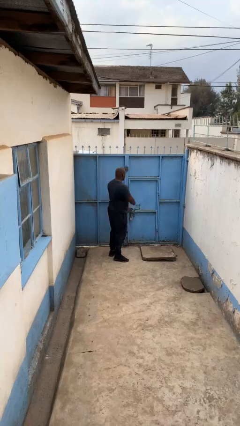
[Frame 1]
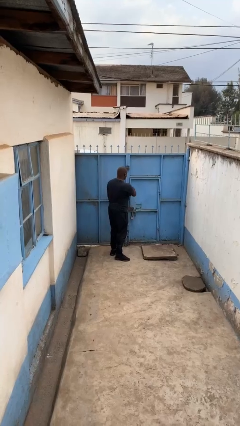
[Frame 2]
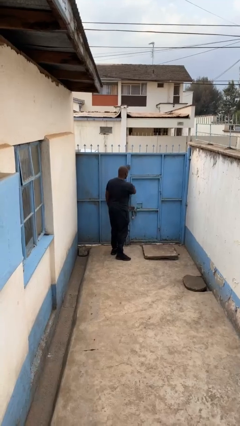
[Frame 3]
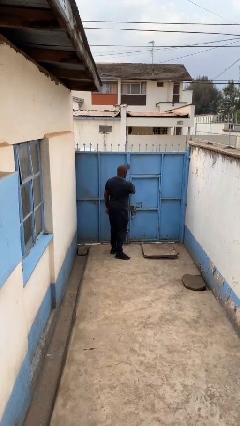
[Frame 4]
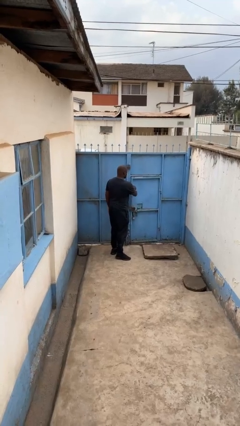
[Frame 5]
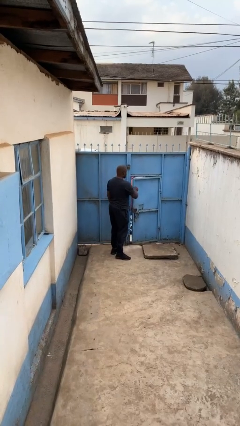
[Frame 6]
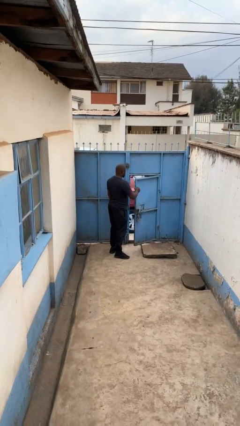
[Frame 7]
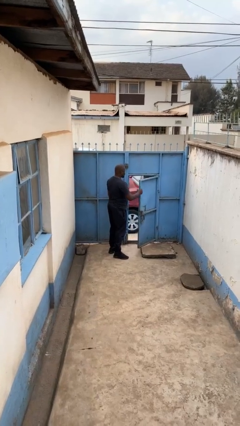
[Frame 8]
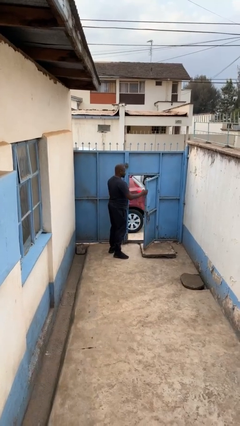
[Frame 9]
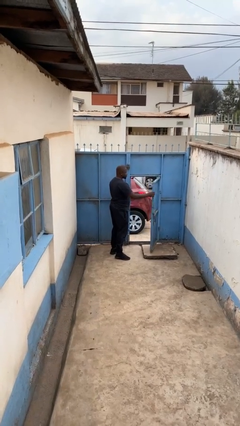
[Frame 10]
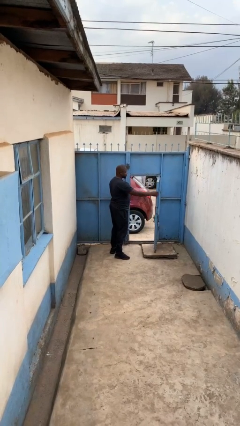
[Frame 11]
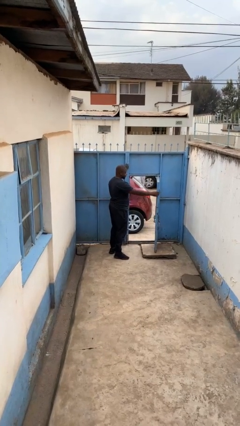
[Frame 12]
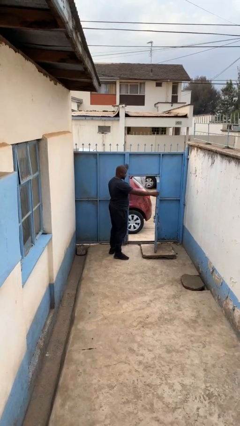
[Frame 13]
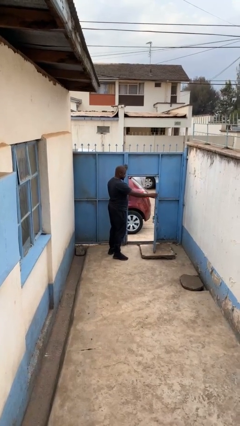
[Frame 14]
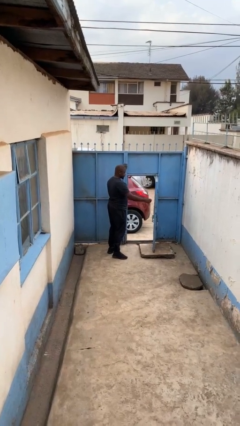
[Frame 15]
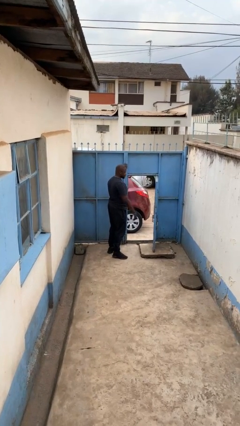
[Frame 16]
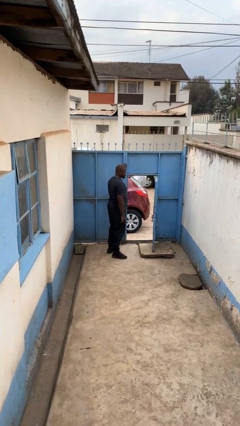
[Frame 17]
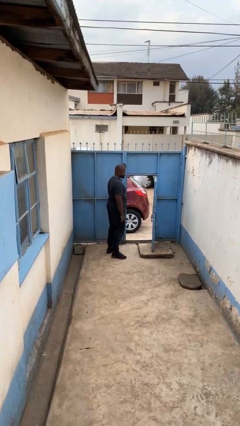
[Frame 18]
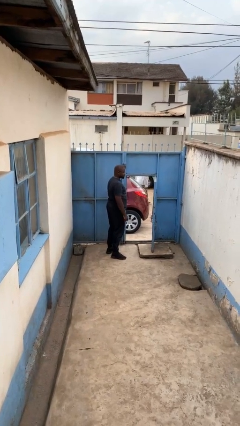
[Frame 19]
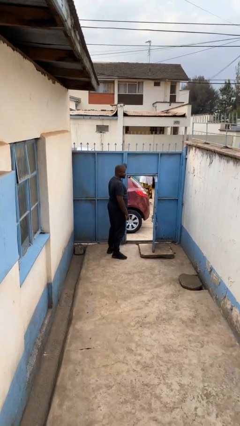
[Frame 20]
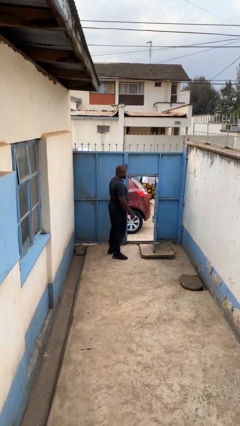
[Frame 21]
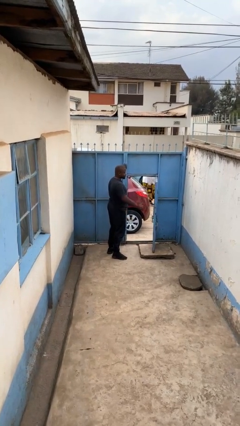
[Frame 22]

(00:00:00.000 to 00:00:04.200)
person opens gate

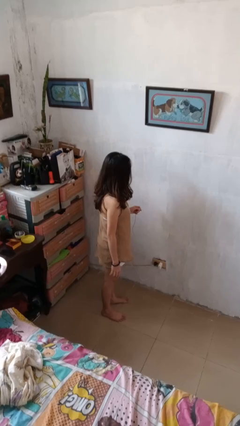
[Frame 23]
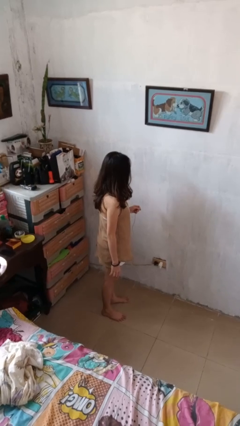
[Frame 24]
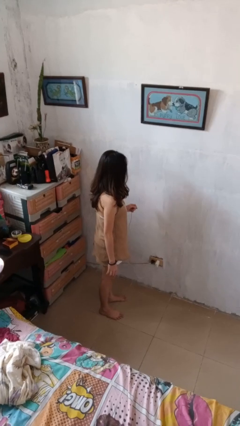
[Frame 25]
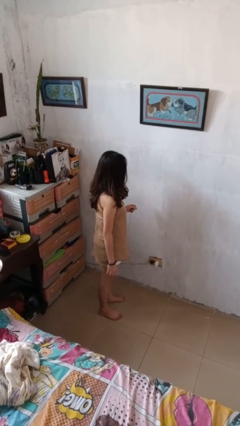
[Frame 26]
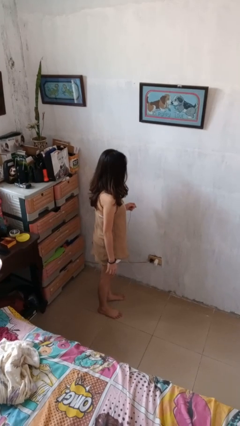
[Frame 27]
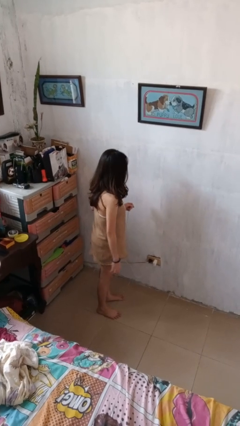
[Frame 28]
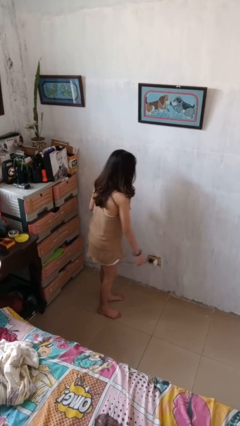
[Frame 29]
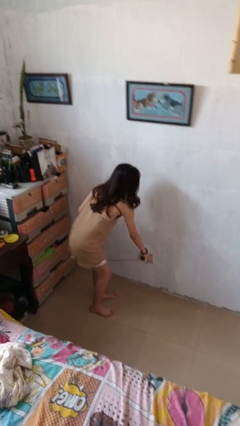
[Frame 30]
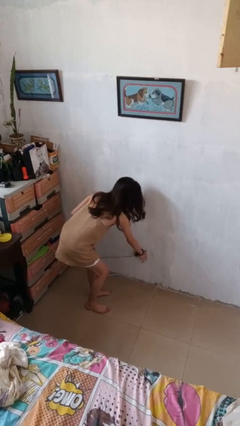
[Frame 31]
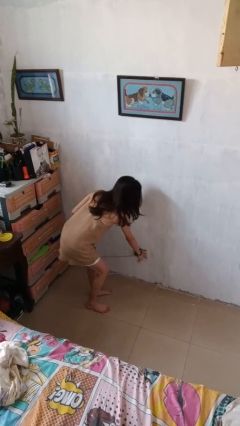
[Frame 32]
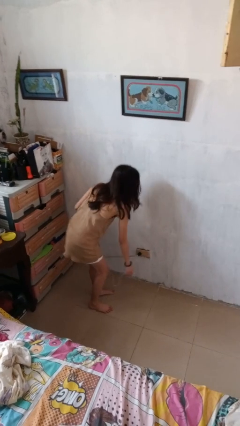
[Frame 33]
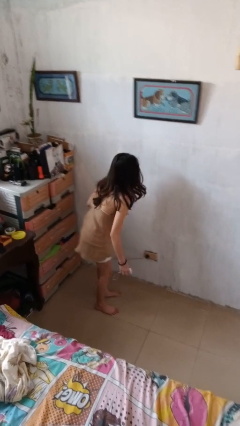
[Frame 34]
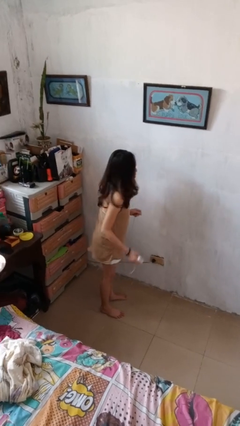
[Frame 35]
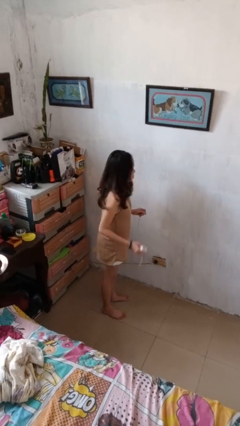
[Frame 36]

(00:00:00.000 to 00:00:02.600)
person unplugs from electrical socket

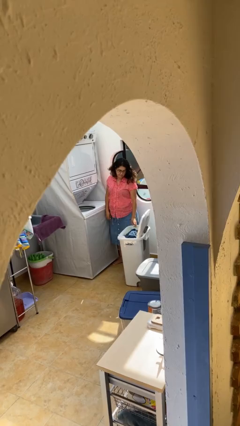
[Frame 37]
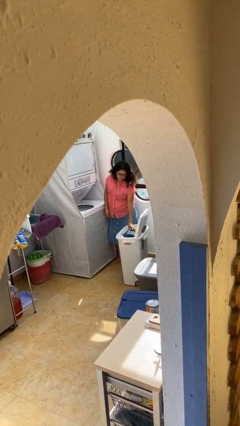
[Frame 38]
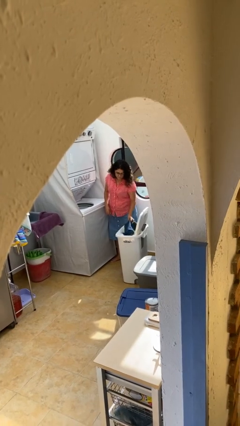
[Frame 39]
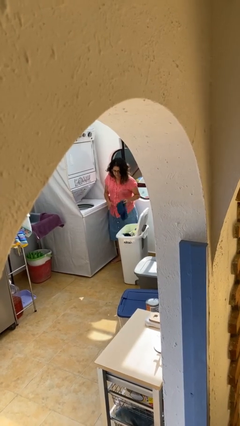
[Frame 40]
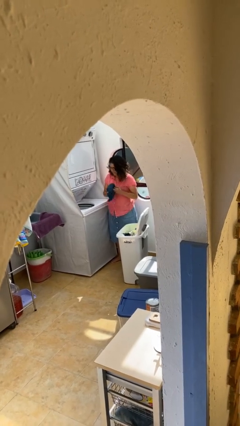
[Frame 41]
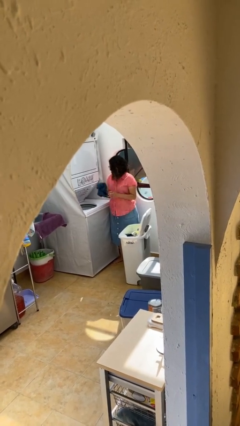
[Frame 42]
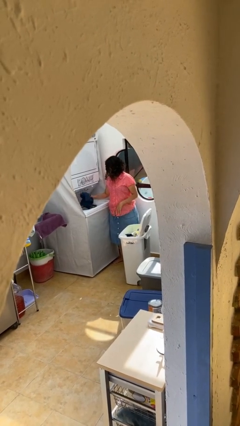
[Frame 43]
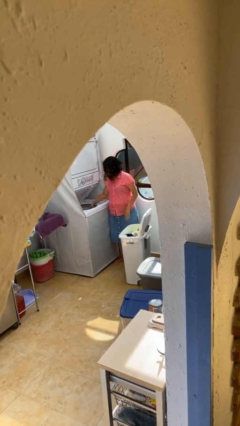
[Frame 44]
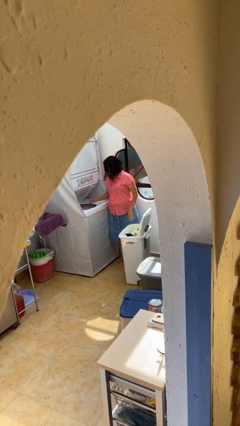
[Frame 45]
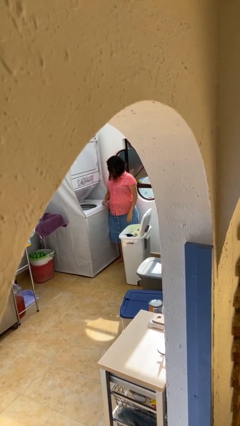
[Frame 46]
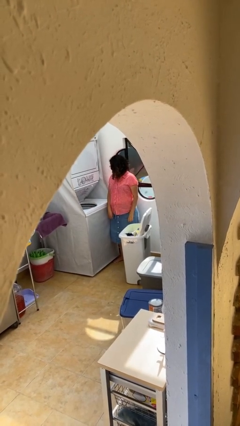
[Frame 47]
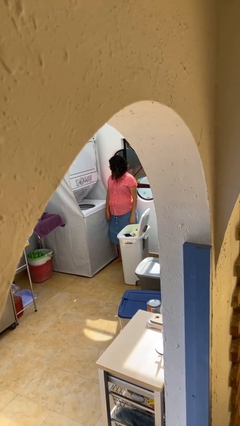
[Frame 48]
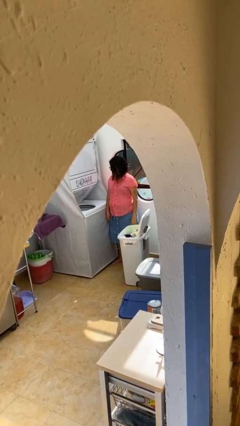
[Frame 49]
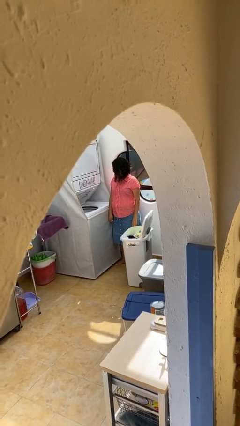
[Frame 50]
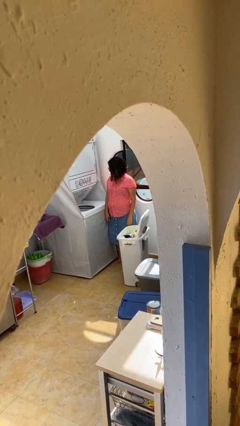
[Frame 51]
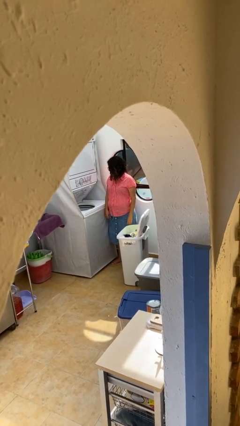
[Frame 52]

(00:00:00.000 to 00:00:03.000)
person loads clotheswasher

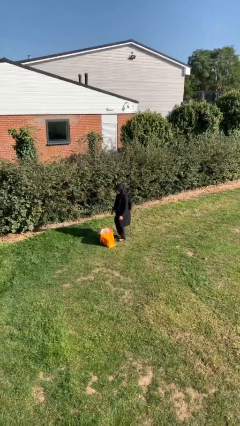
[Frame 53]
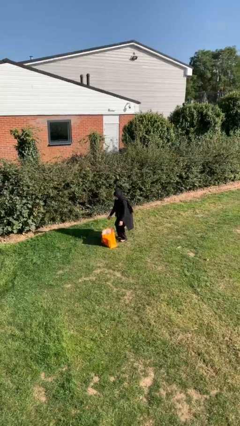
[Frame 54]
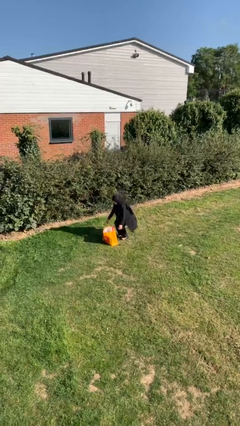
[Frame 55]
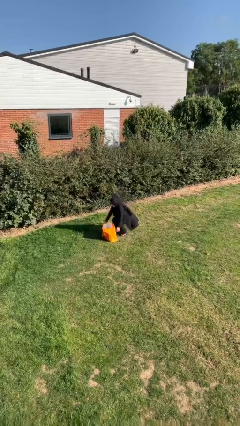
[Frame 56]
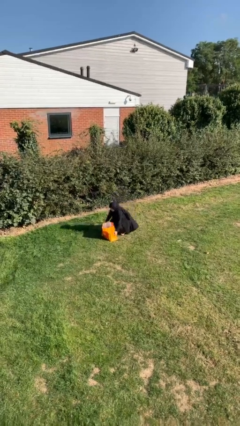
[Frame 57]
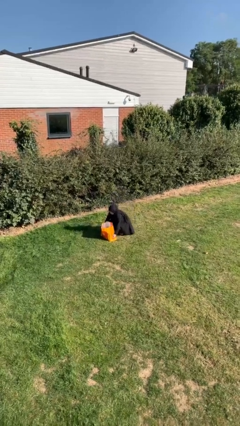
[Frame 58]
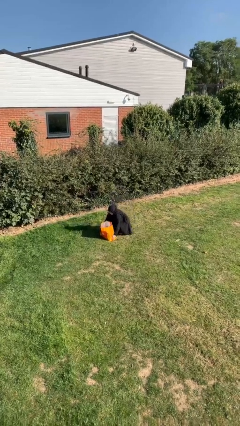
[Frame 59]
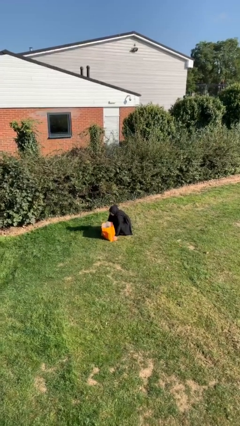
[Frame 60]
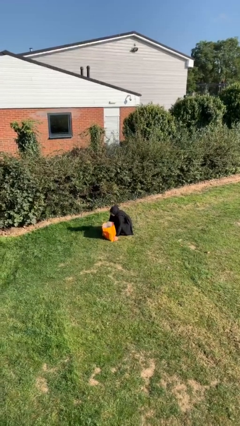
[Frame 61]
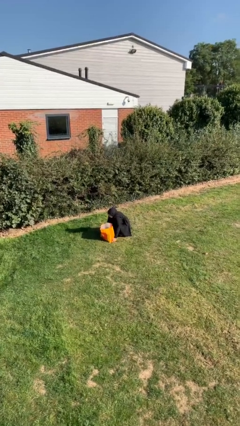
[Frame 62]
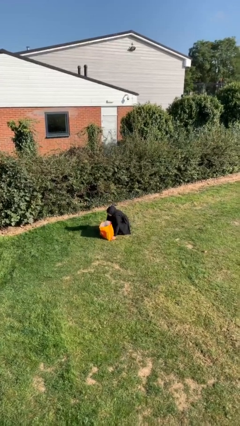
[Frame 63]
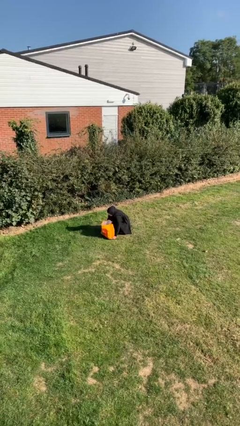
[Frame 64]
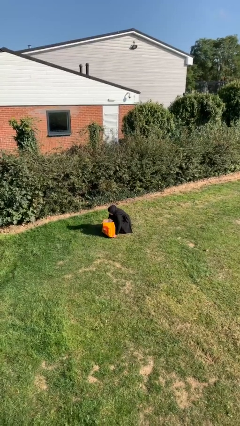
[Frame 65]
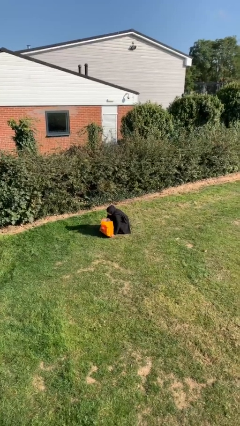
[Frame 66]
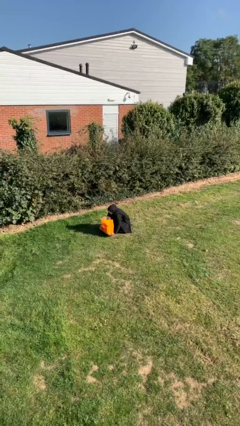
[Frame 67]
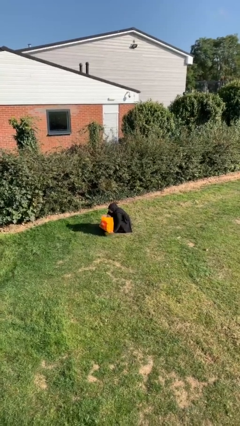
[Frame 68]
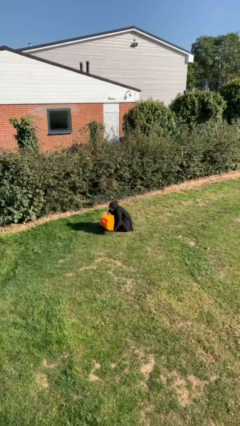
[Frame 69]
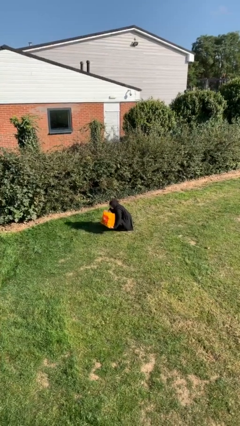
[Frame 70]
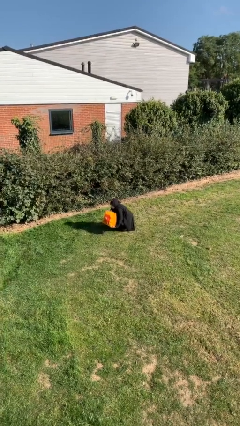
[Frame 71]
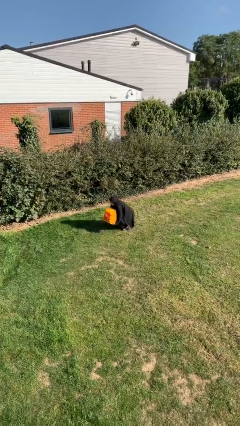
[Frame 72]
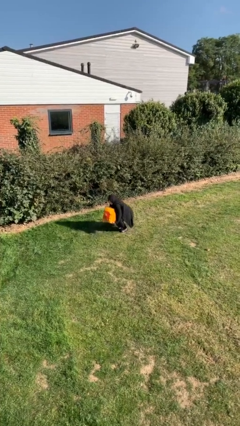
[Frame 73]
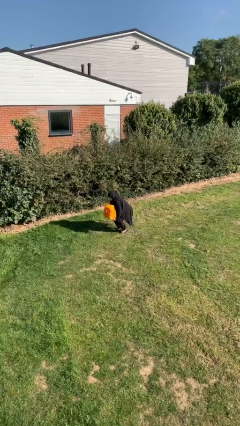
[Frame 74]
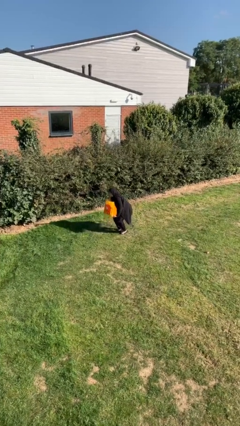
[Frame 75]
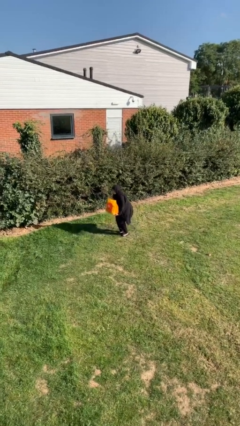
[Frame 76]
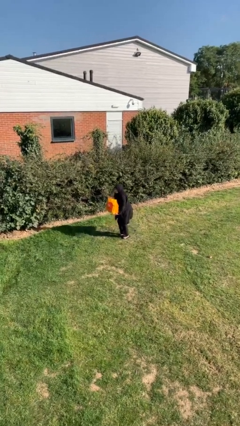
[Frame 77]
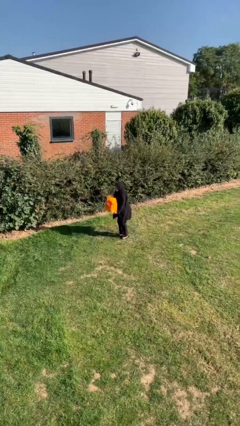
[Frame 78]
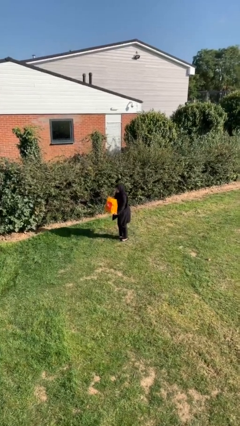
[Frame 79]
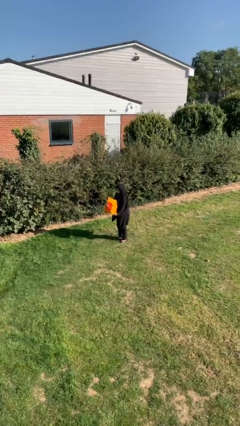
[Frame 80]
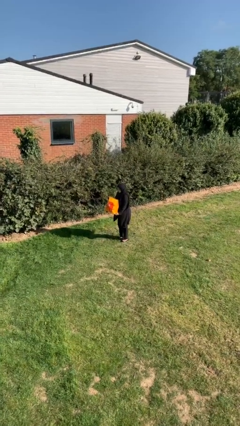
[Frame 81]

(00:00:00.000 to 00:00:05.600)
person picks up object from floor

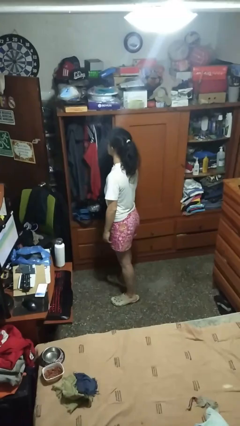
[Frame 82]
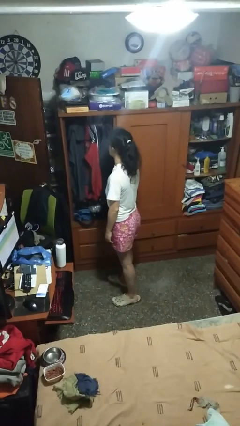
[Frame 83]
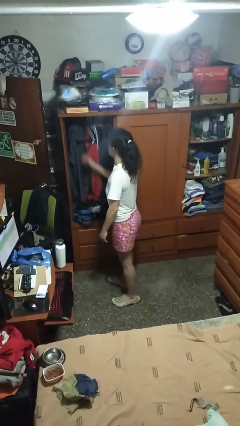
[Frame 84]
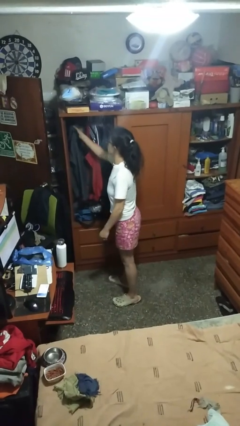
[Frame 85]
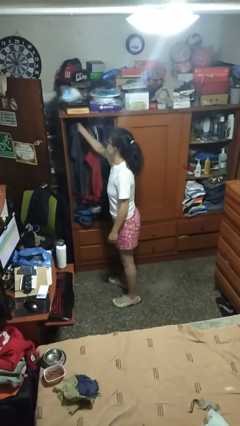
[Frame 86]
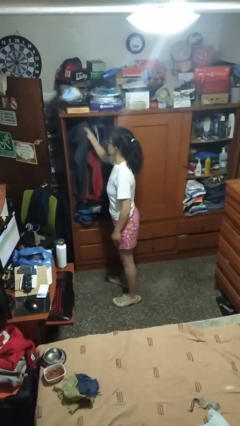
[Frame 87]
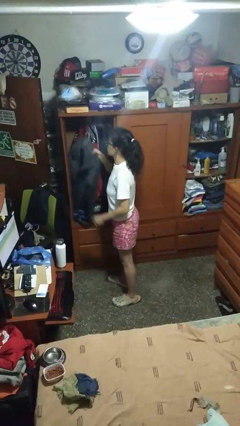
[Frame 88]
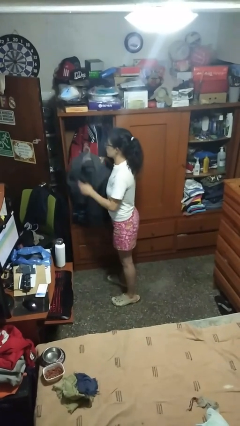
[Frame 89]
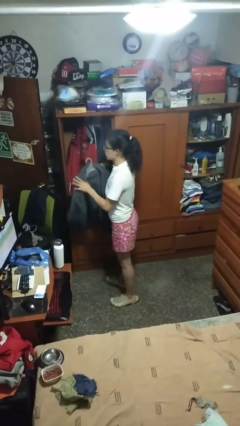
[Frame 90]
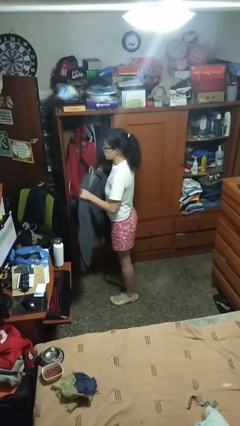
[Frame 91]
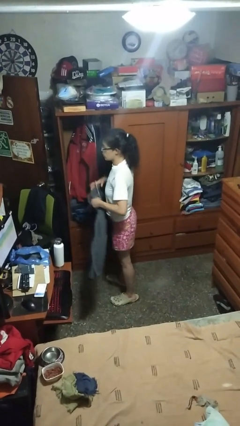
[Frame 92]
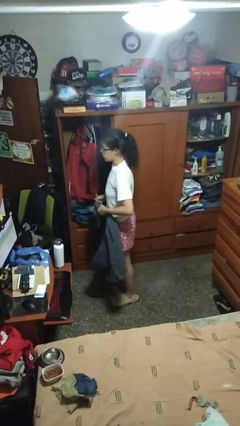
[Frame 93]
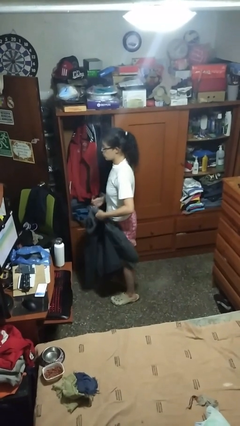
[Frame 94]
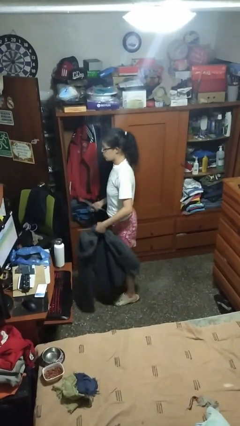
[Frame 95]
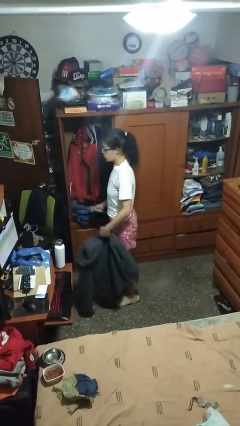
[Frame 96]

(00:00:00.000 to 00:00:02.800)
person takes clothes from closet
